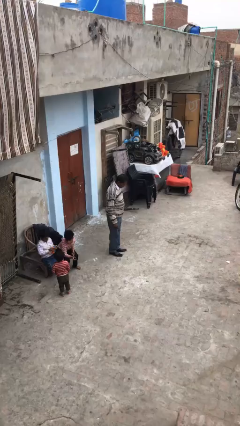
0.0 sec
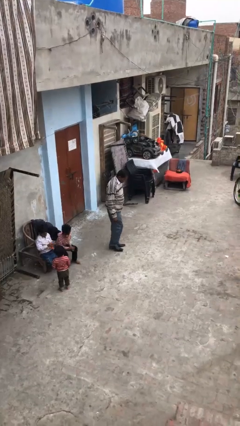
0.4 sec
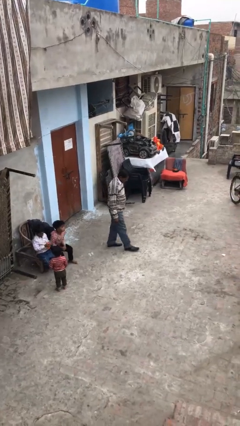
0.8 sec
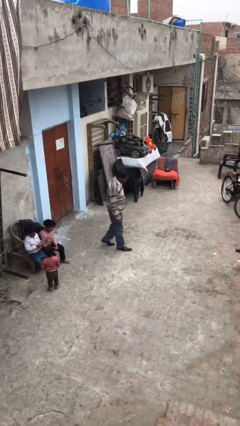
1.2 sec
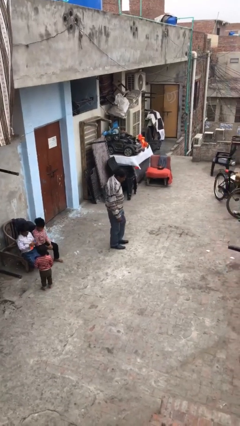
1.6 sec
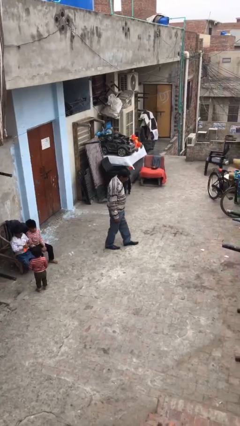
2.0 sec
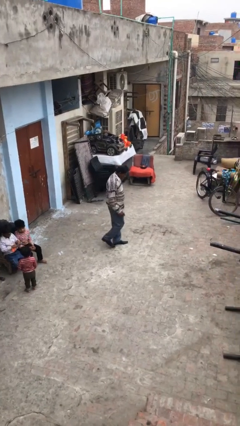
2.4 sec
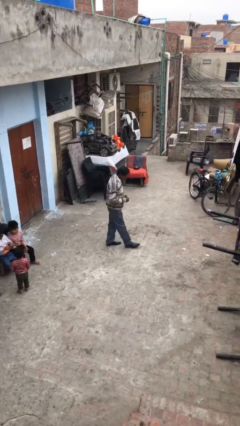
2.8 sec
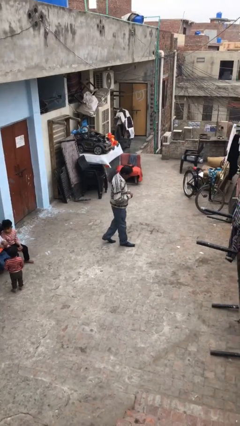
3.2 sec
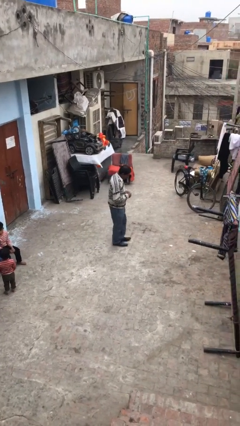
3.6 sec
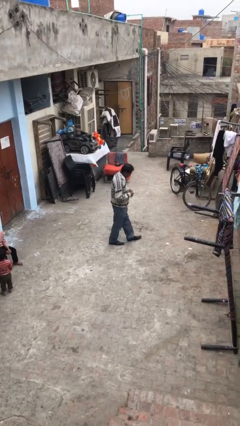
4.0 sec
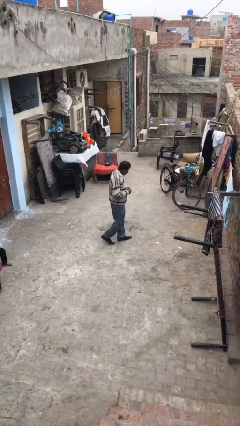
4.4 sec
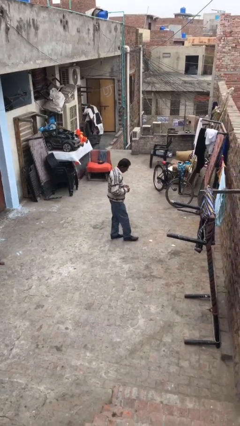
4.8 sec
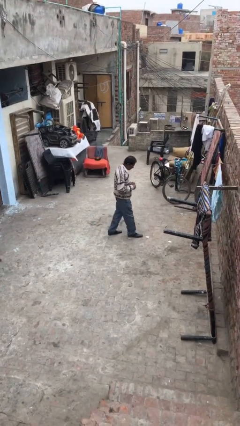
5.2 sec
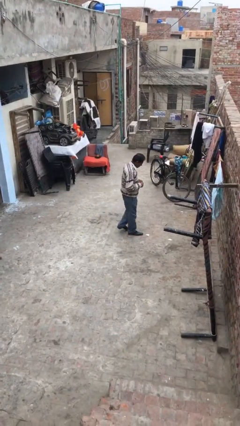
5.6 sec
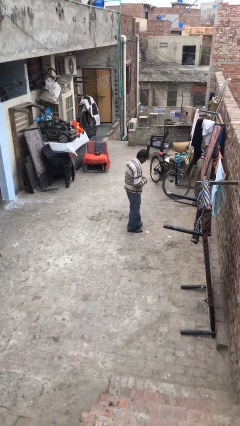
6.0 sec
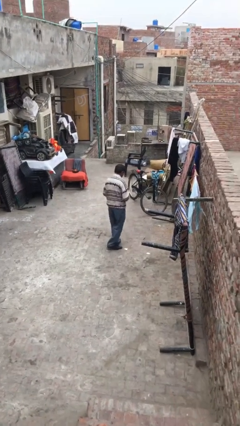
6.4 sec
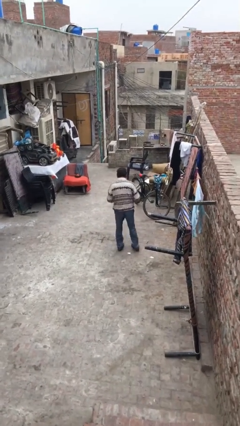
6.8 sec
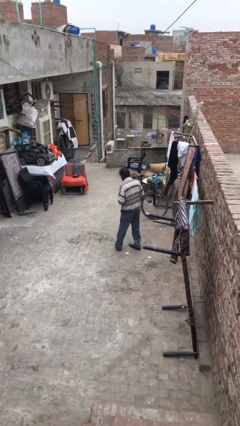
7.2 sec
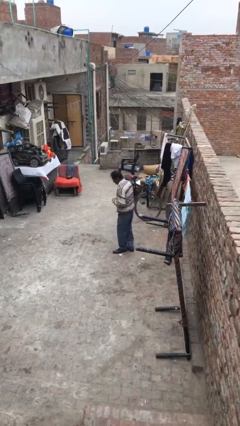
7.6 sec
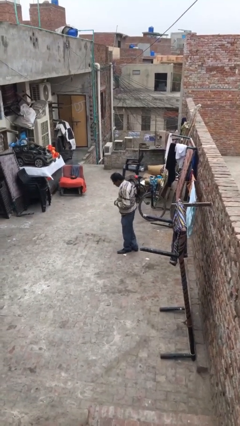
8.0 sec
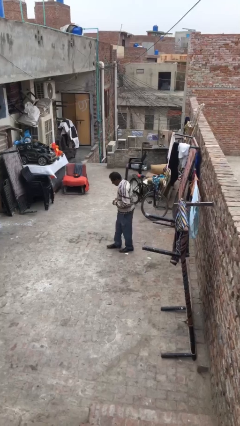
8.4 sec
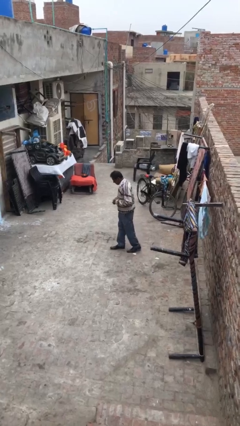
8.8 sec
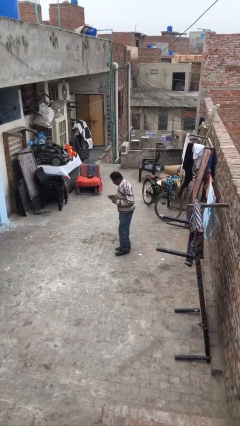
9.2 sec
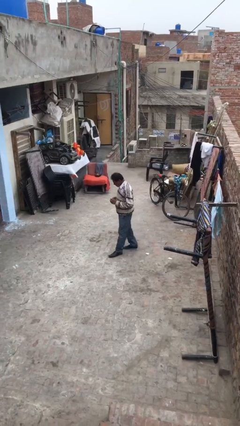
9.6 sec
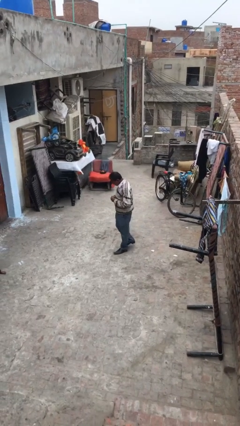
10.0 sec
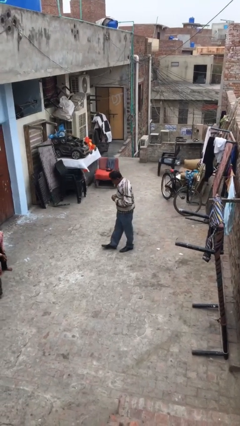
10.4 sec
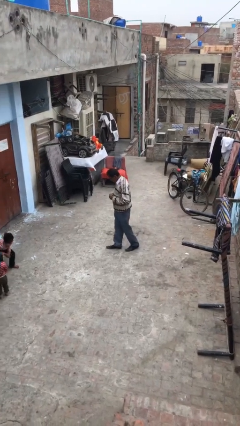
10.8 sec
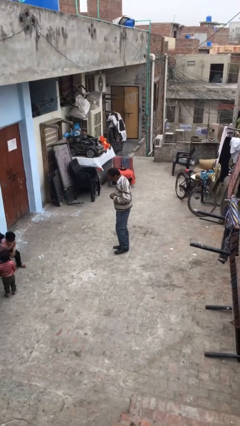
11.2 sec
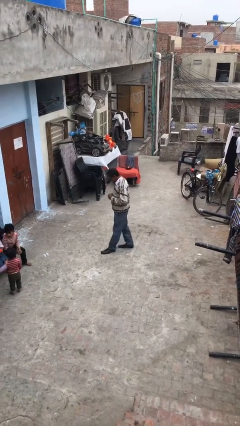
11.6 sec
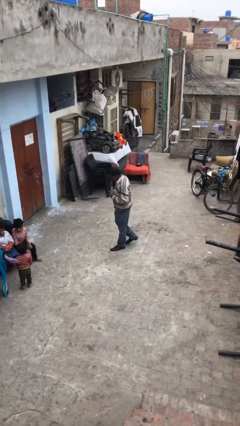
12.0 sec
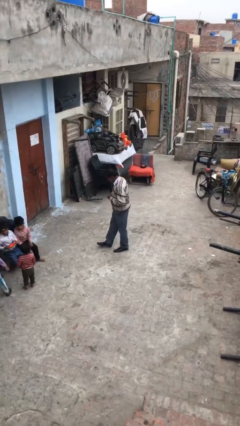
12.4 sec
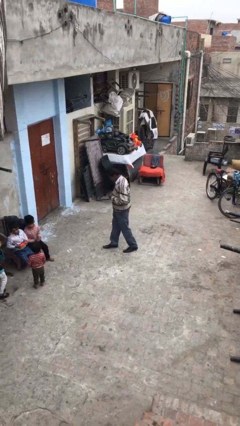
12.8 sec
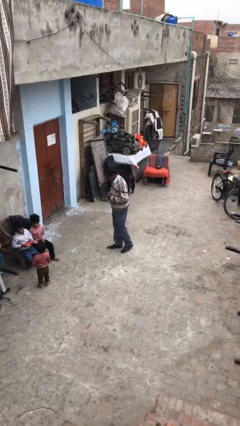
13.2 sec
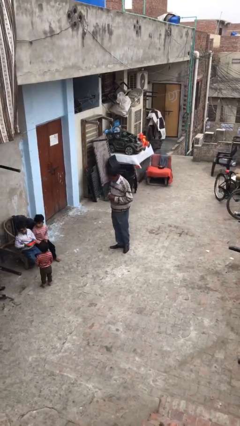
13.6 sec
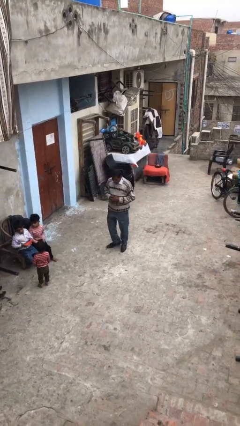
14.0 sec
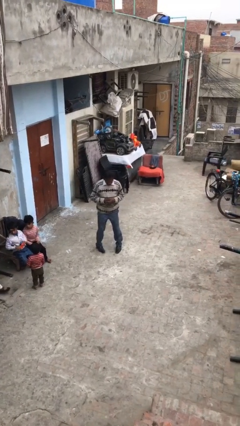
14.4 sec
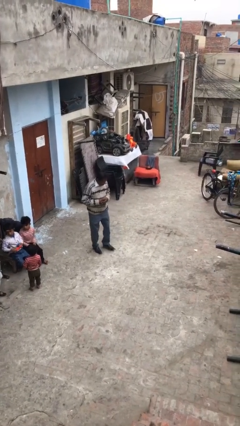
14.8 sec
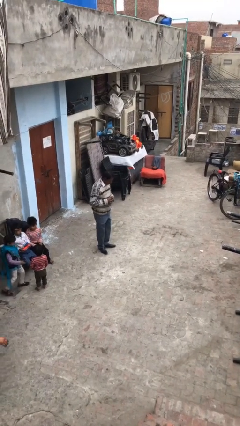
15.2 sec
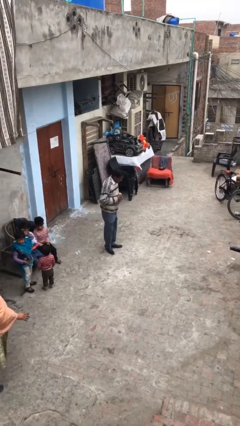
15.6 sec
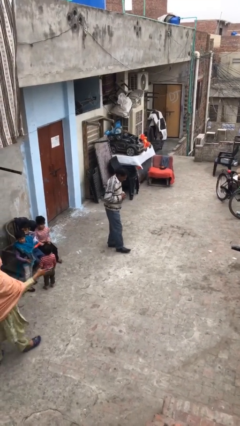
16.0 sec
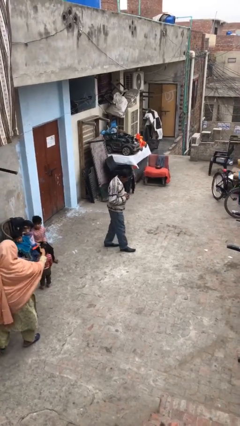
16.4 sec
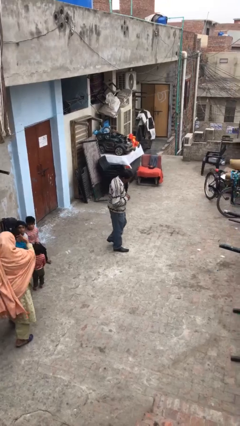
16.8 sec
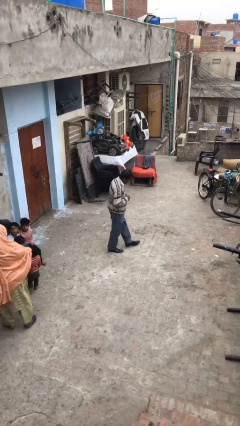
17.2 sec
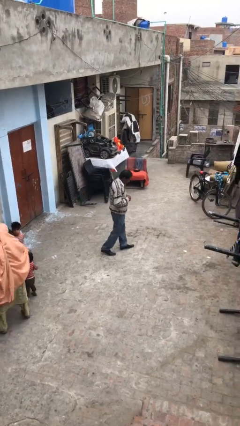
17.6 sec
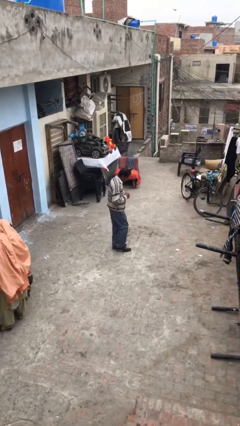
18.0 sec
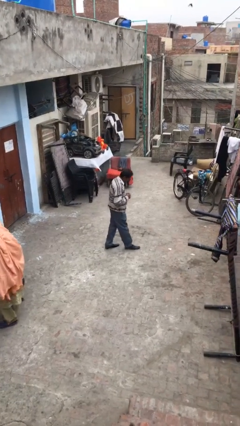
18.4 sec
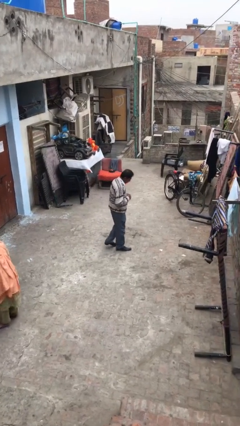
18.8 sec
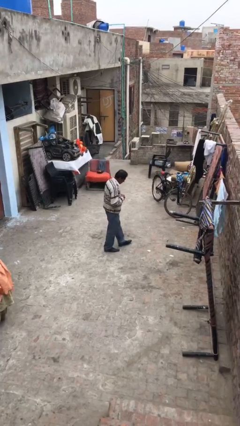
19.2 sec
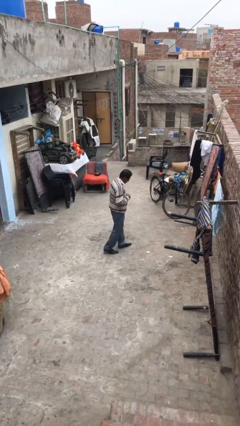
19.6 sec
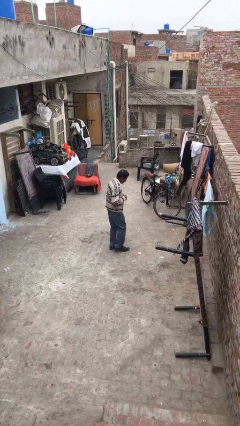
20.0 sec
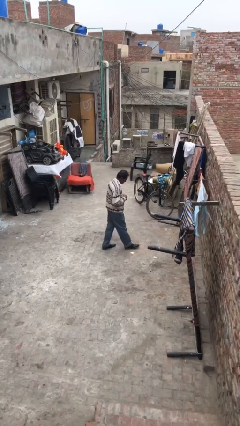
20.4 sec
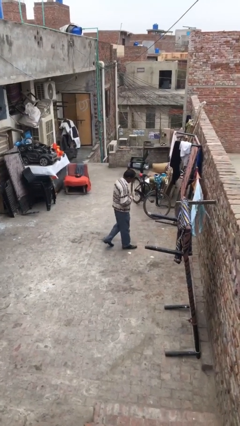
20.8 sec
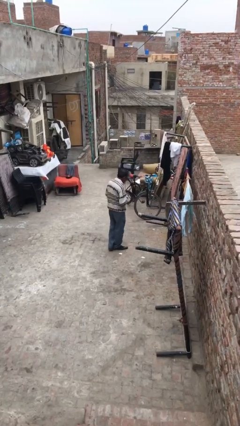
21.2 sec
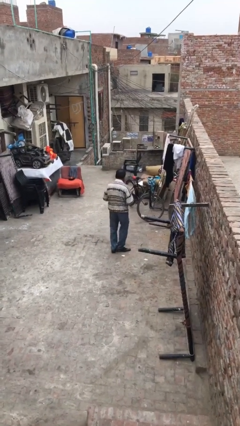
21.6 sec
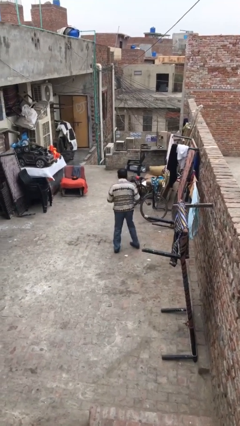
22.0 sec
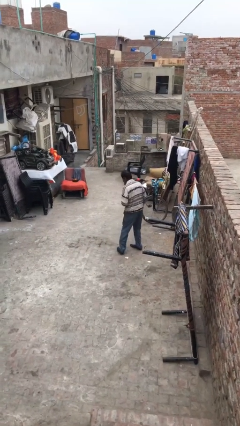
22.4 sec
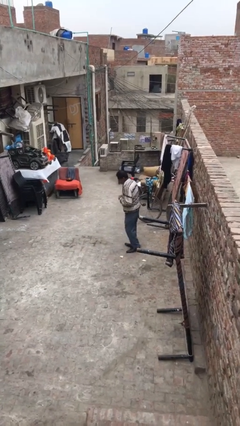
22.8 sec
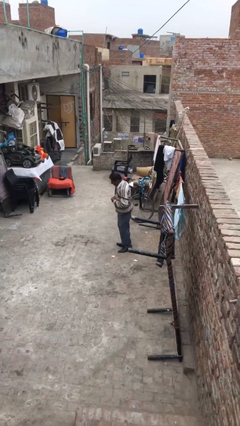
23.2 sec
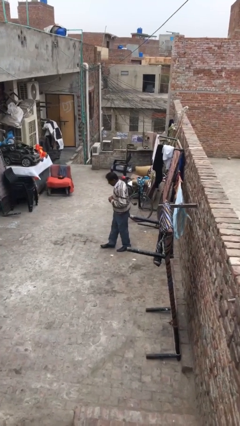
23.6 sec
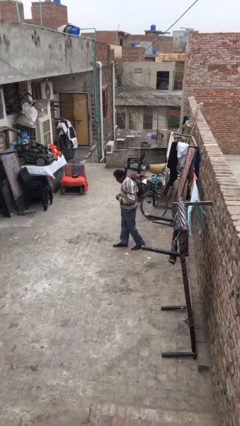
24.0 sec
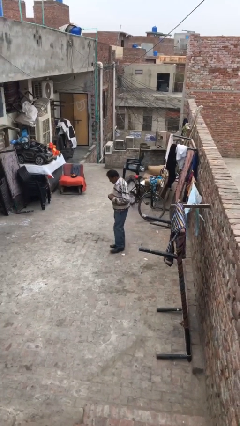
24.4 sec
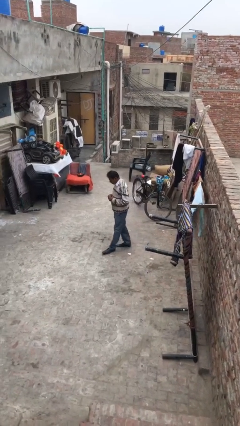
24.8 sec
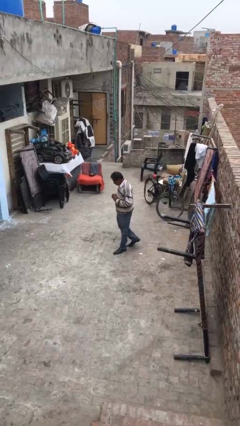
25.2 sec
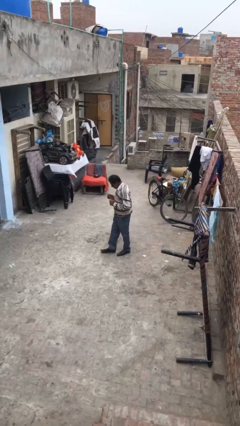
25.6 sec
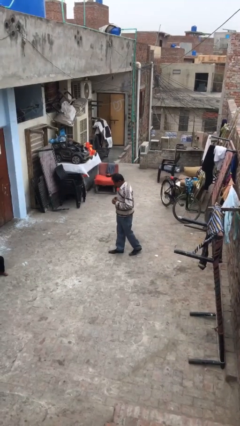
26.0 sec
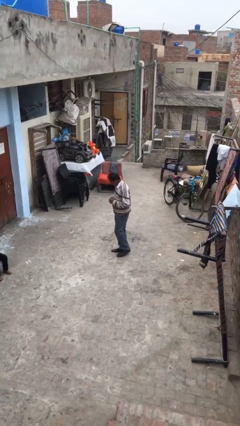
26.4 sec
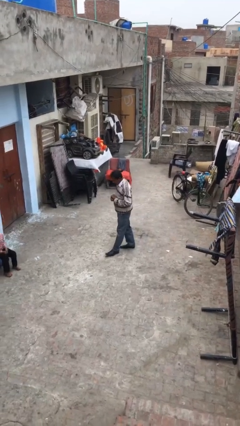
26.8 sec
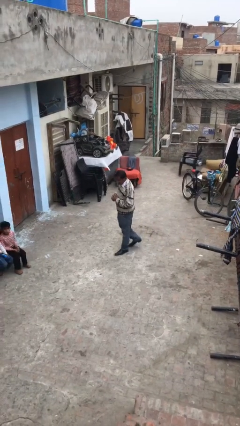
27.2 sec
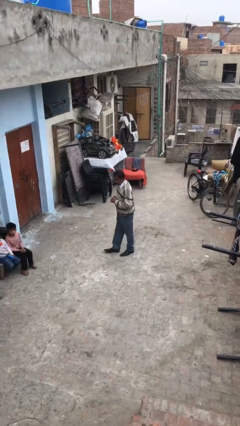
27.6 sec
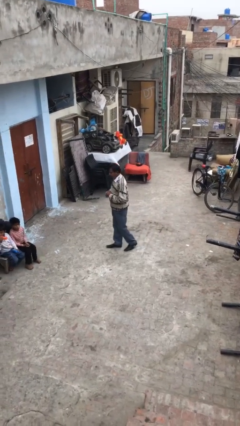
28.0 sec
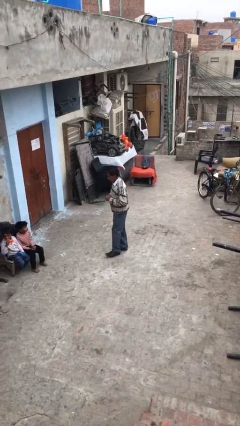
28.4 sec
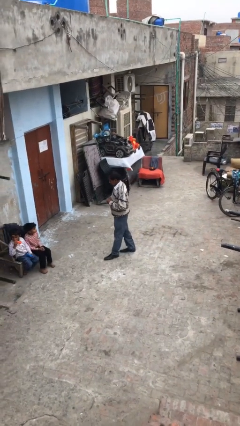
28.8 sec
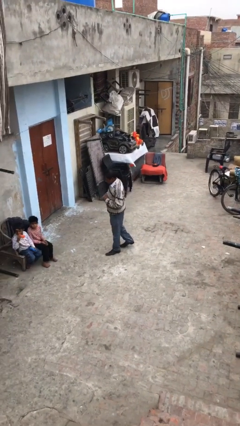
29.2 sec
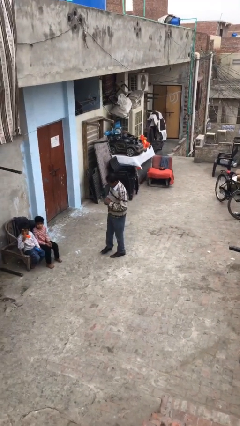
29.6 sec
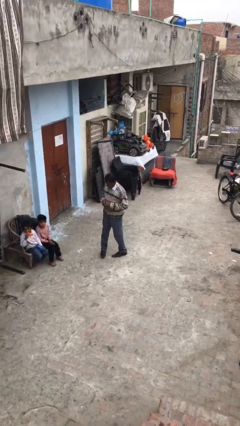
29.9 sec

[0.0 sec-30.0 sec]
person walks

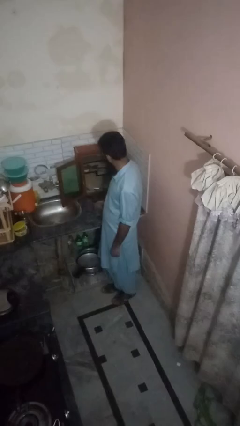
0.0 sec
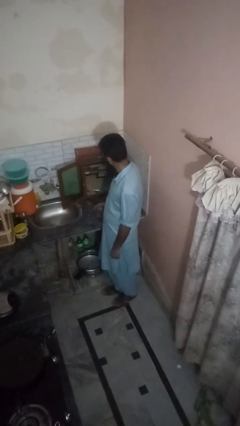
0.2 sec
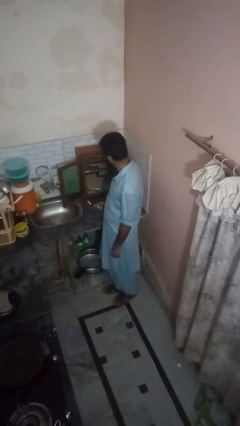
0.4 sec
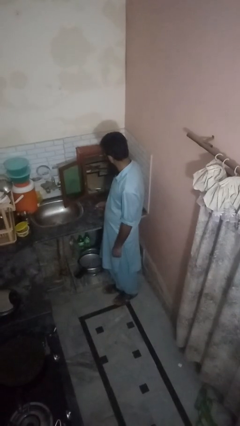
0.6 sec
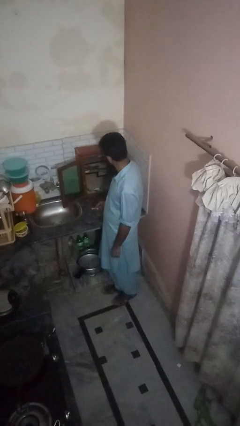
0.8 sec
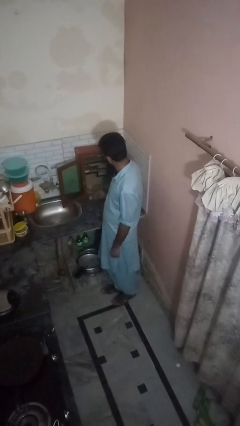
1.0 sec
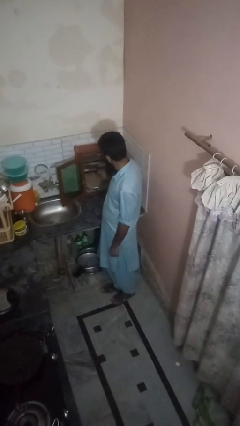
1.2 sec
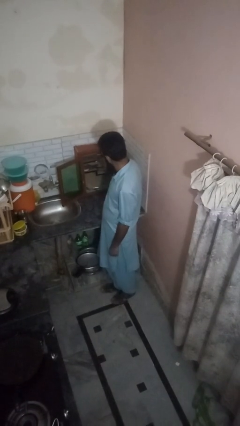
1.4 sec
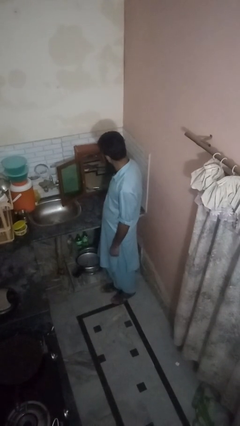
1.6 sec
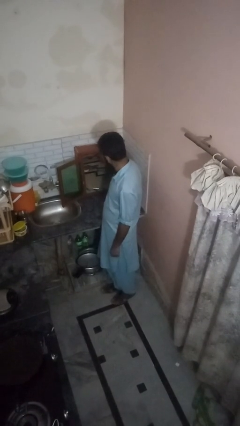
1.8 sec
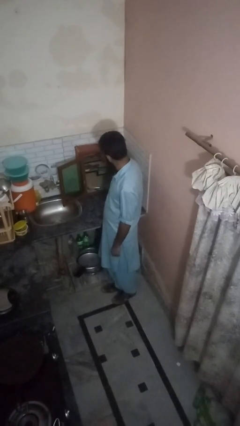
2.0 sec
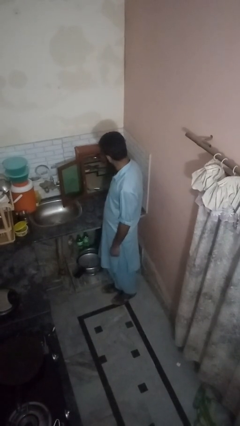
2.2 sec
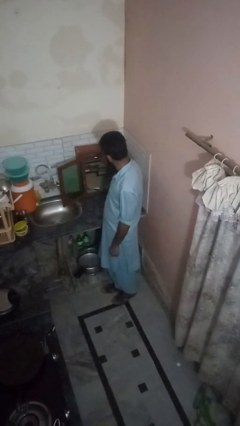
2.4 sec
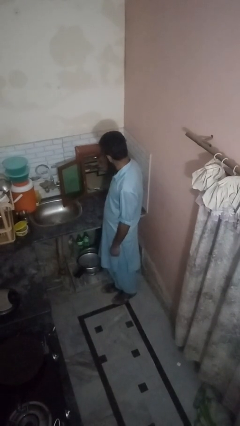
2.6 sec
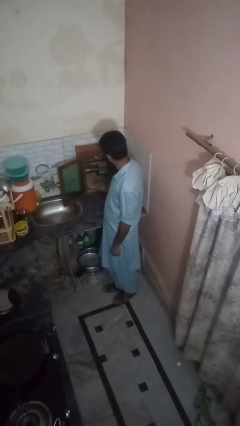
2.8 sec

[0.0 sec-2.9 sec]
person puts object into kitchen drawer

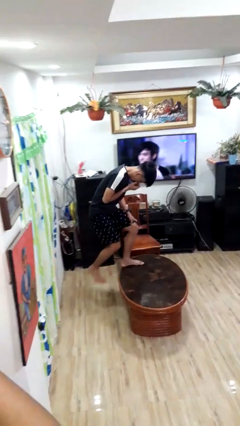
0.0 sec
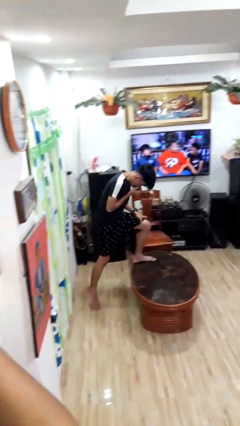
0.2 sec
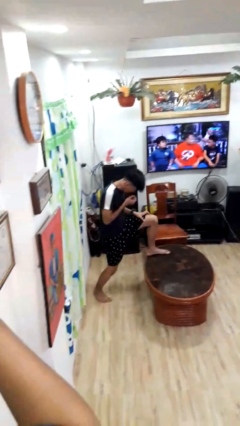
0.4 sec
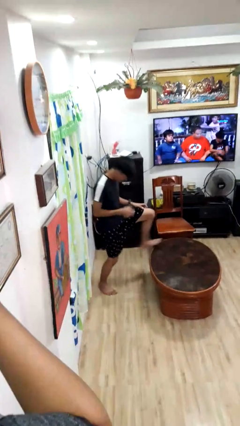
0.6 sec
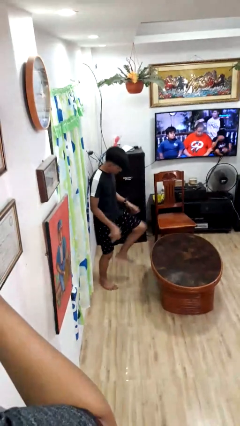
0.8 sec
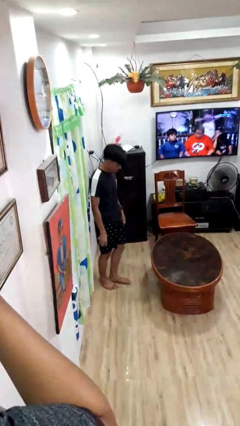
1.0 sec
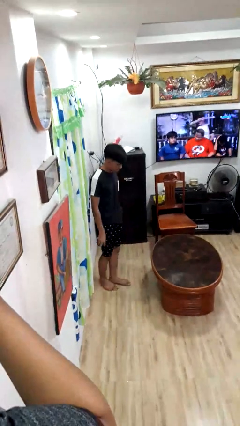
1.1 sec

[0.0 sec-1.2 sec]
person climbs off table
